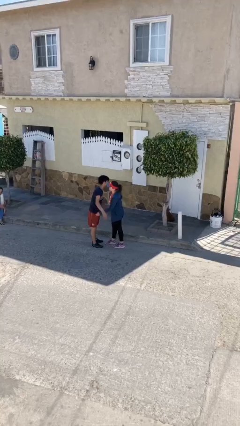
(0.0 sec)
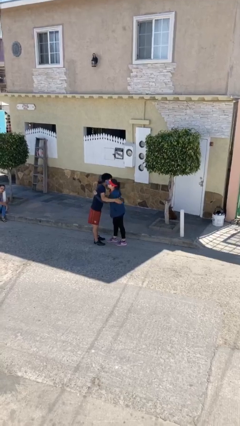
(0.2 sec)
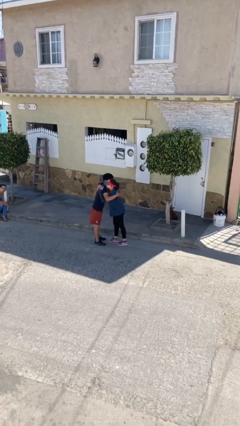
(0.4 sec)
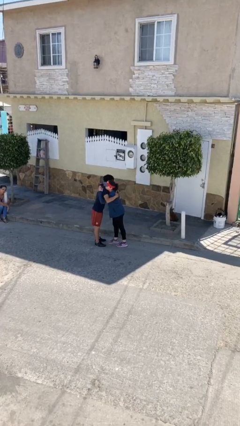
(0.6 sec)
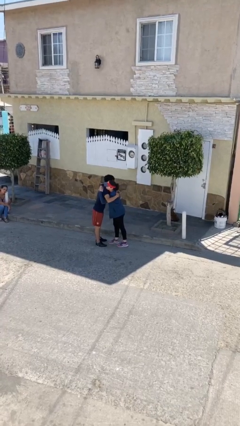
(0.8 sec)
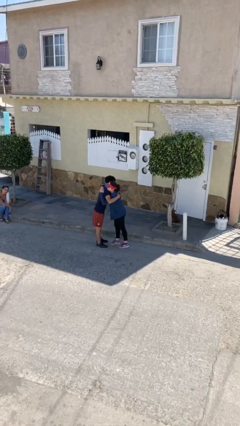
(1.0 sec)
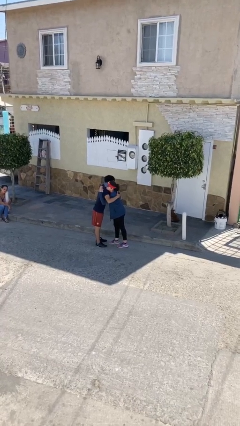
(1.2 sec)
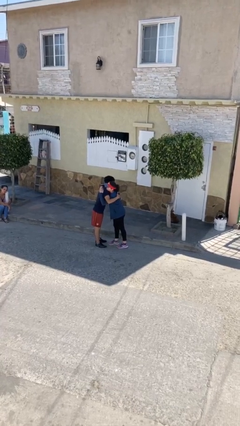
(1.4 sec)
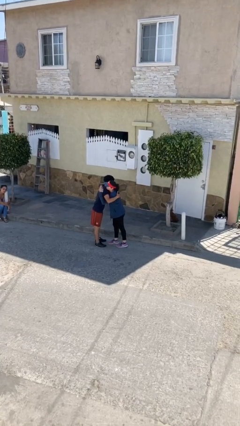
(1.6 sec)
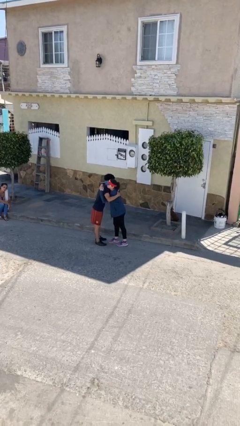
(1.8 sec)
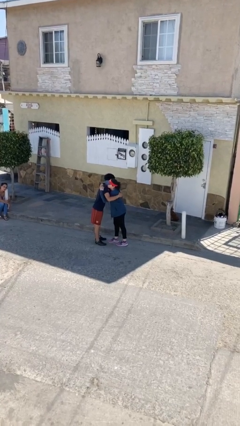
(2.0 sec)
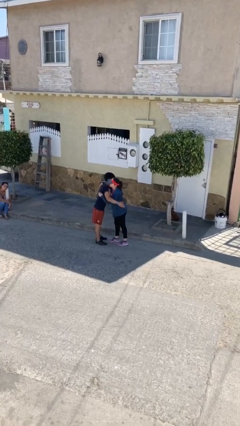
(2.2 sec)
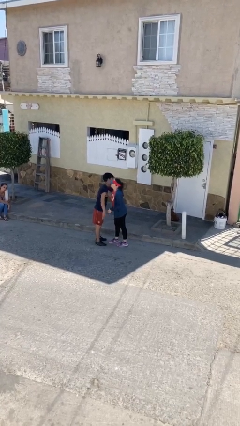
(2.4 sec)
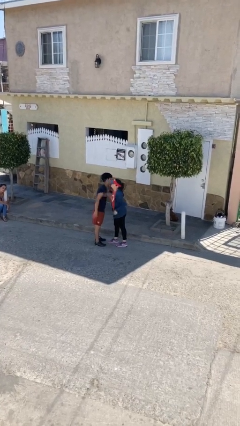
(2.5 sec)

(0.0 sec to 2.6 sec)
person embraces person

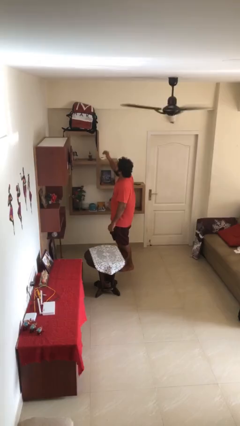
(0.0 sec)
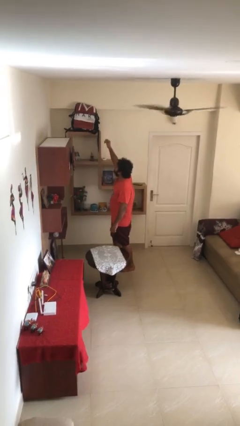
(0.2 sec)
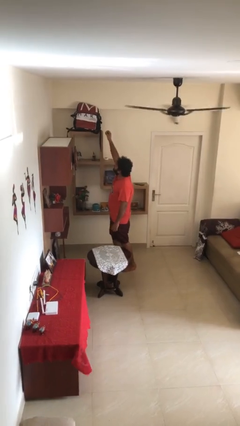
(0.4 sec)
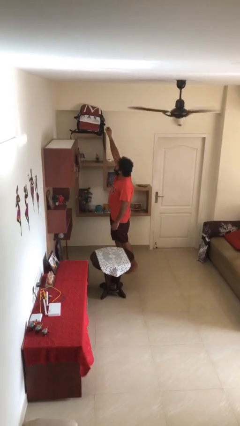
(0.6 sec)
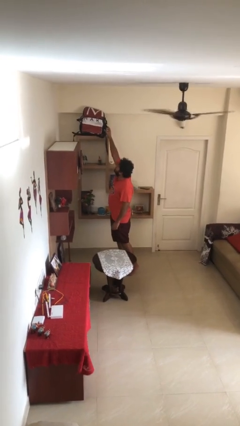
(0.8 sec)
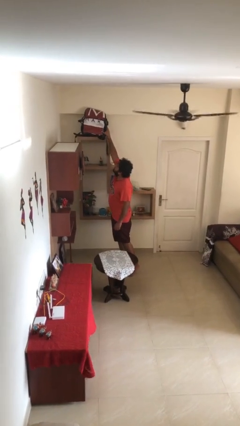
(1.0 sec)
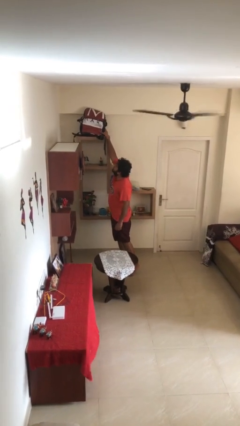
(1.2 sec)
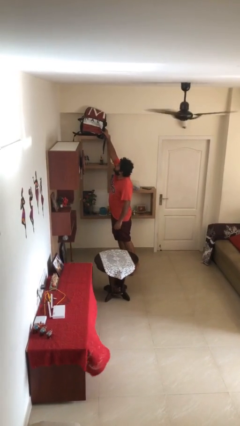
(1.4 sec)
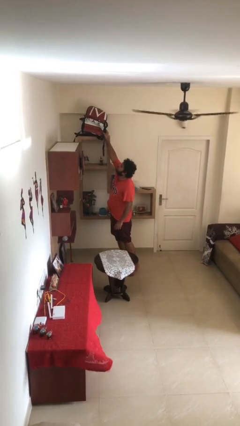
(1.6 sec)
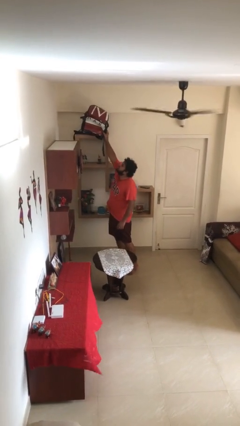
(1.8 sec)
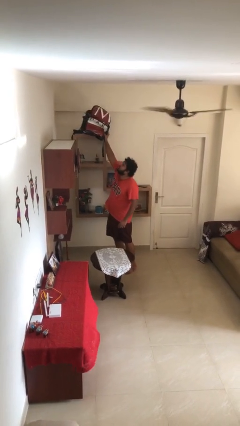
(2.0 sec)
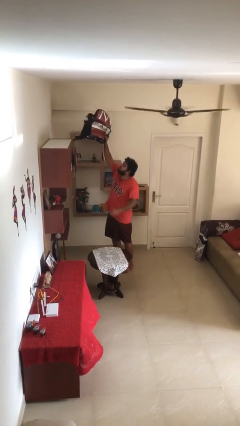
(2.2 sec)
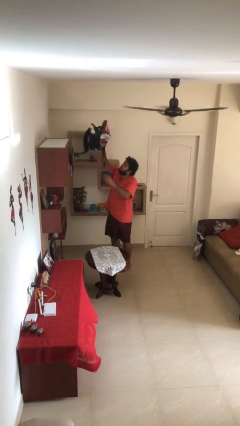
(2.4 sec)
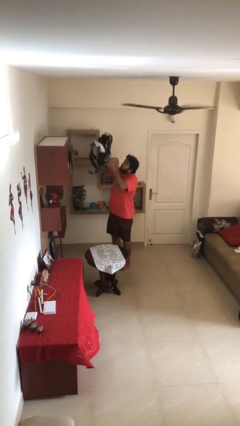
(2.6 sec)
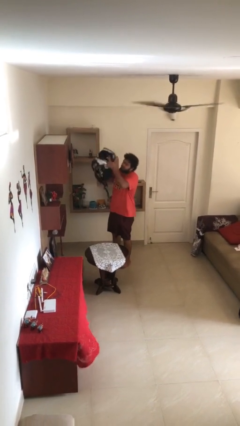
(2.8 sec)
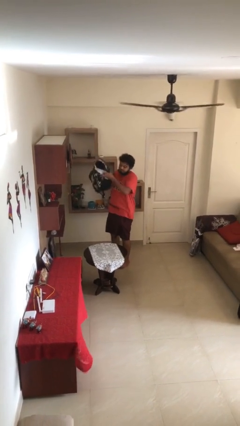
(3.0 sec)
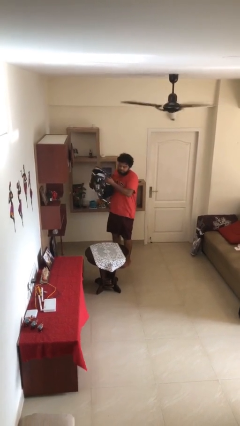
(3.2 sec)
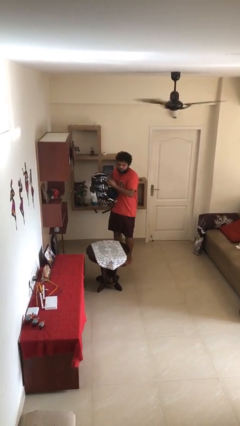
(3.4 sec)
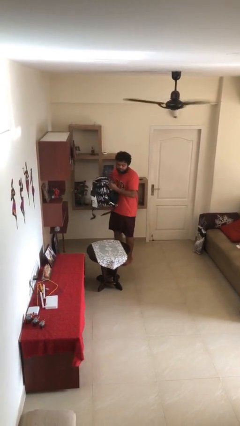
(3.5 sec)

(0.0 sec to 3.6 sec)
person picks up object from shelf

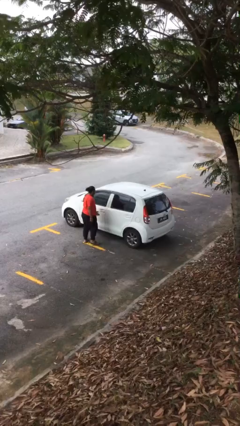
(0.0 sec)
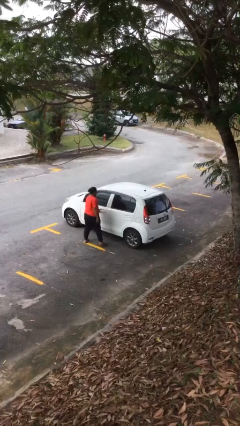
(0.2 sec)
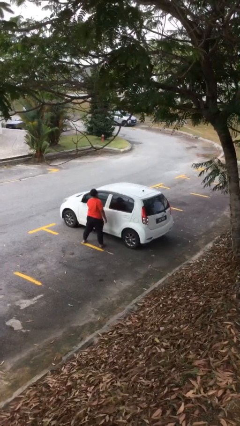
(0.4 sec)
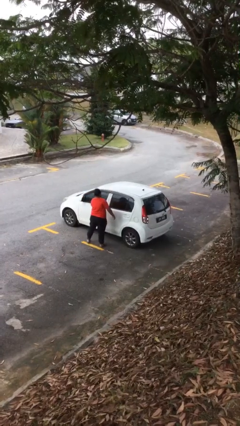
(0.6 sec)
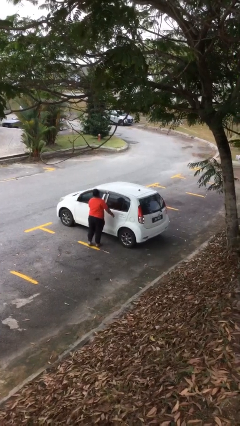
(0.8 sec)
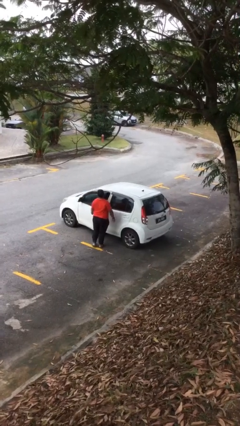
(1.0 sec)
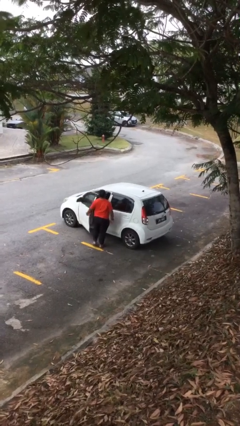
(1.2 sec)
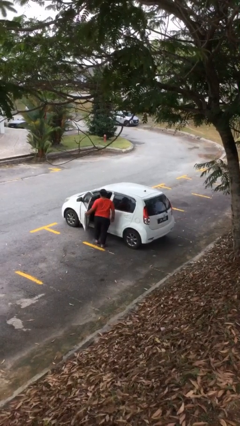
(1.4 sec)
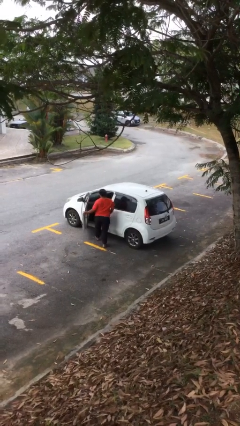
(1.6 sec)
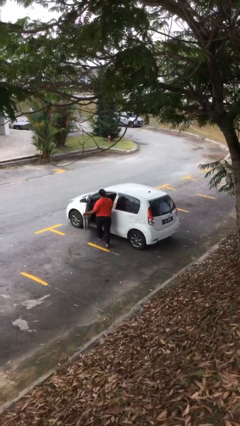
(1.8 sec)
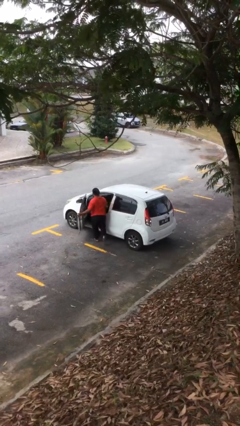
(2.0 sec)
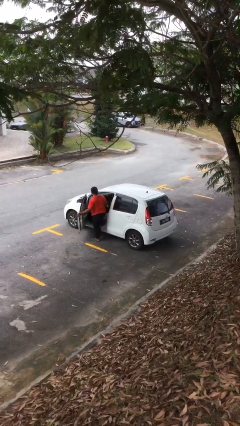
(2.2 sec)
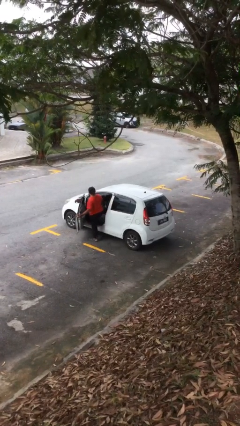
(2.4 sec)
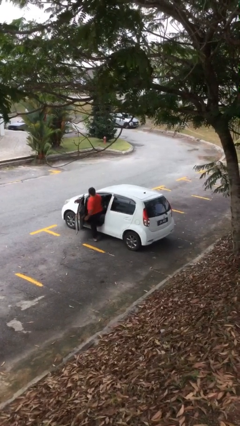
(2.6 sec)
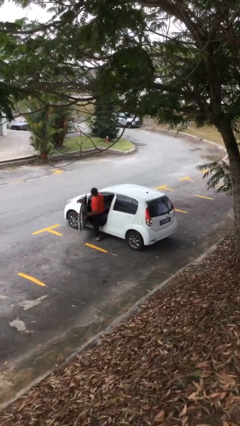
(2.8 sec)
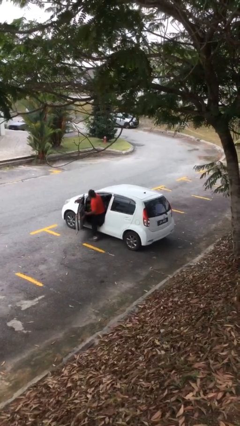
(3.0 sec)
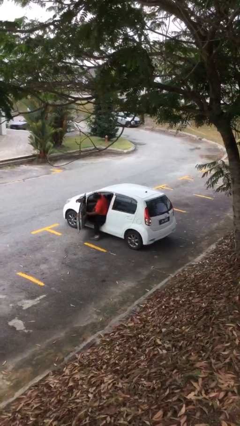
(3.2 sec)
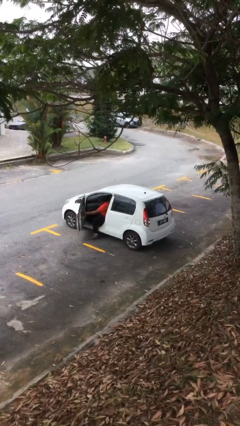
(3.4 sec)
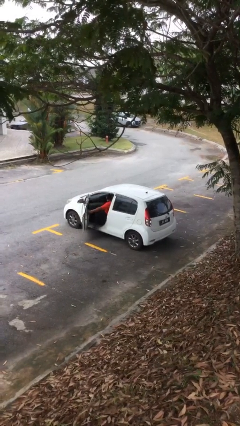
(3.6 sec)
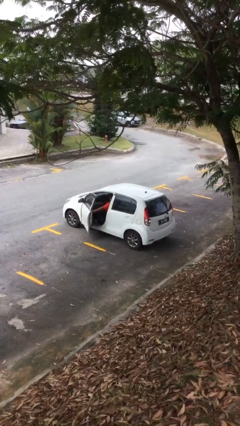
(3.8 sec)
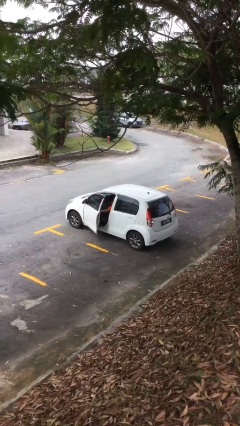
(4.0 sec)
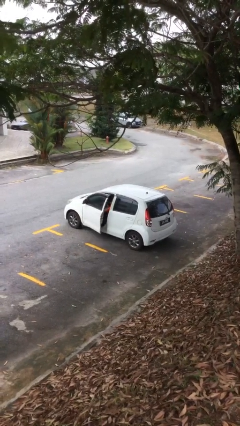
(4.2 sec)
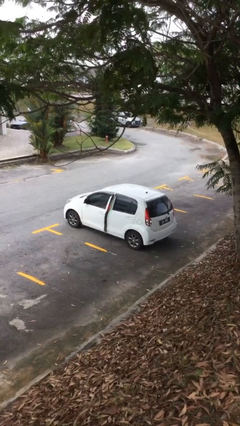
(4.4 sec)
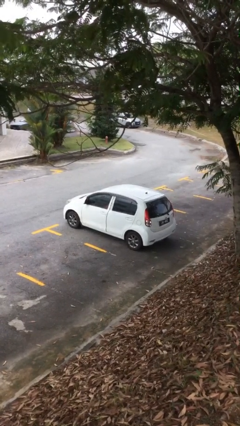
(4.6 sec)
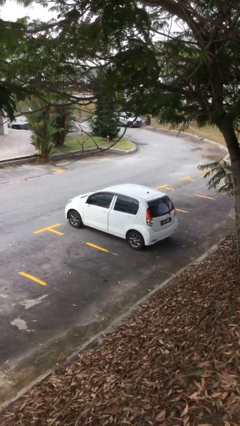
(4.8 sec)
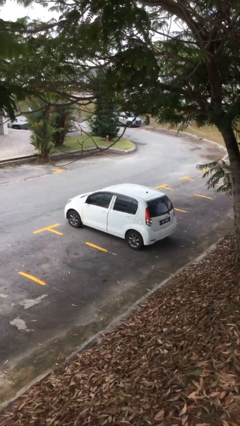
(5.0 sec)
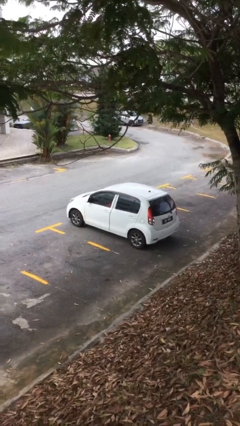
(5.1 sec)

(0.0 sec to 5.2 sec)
car picks up person

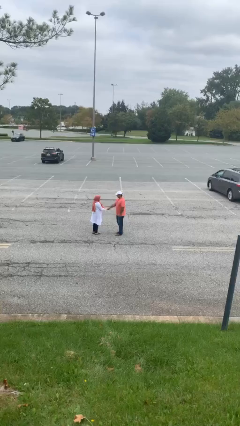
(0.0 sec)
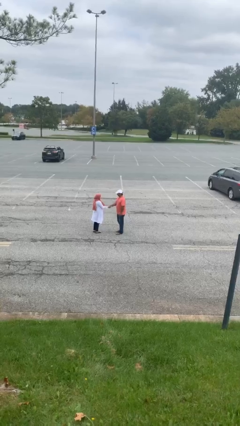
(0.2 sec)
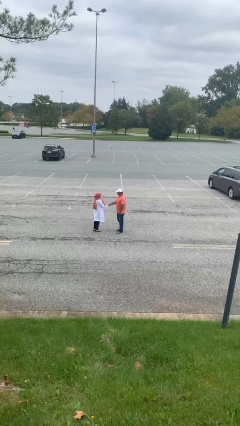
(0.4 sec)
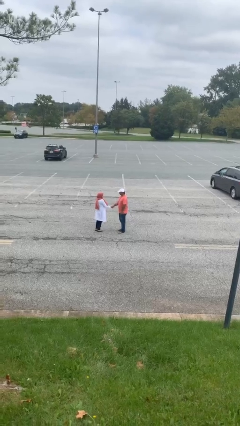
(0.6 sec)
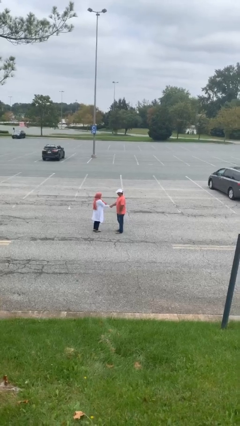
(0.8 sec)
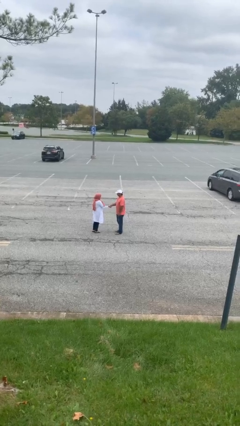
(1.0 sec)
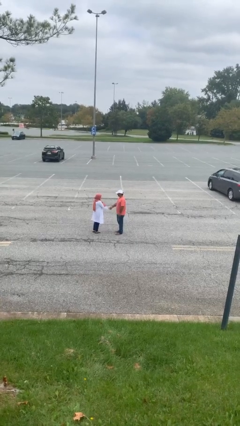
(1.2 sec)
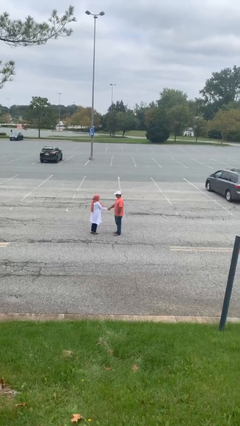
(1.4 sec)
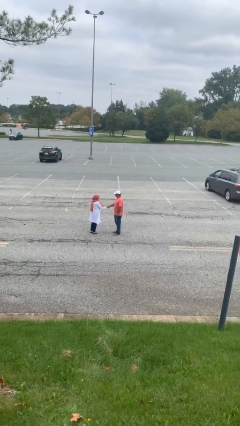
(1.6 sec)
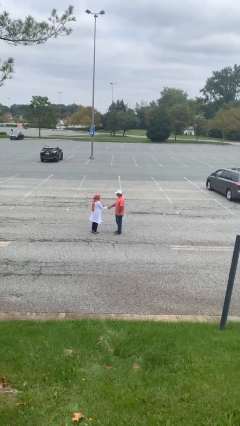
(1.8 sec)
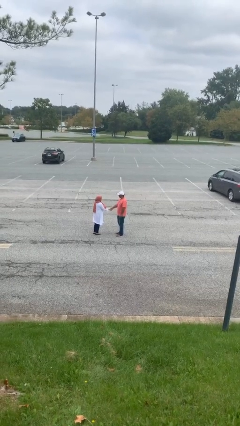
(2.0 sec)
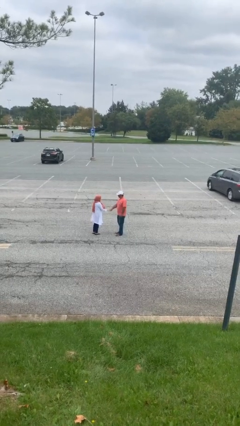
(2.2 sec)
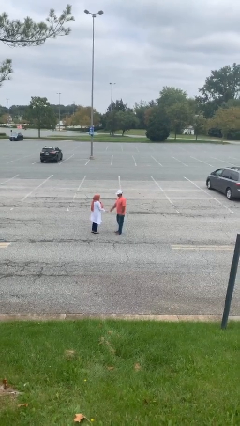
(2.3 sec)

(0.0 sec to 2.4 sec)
person shakes hand

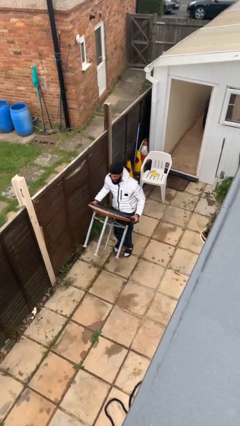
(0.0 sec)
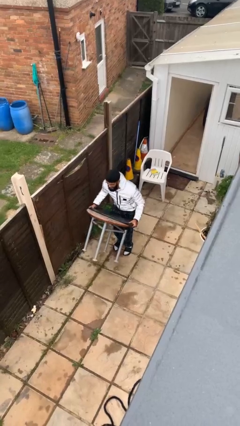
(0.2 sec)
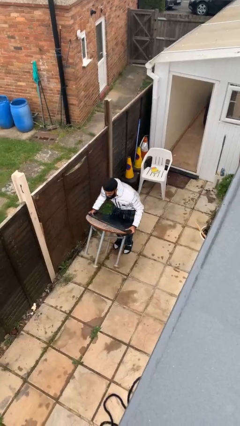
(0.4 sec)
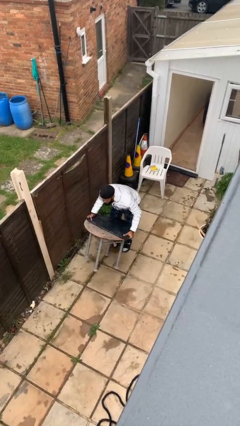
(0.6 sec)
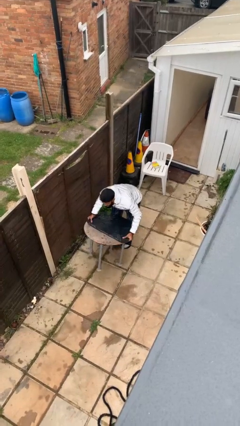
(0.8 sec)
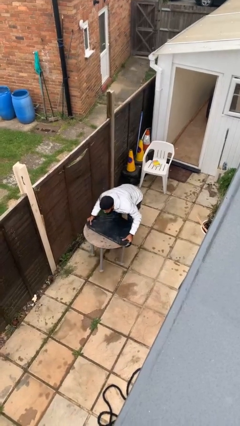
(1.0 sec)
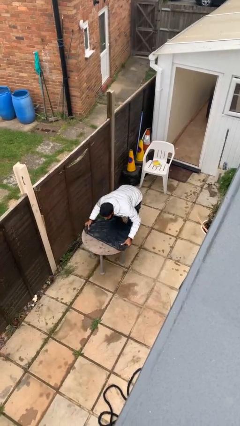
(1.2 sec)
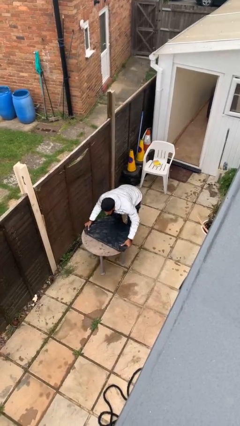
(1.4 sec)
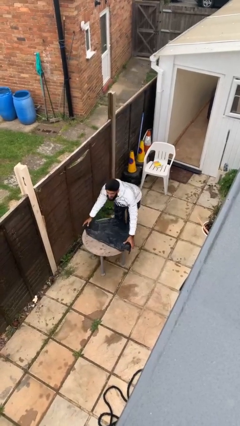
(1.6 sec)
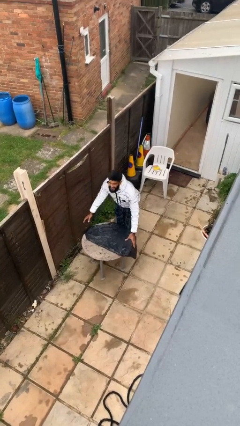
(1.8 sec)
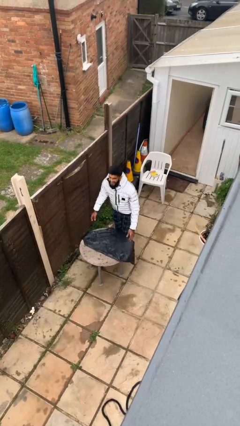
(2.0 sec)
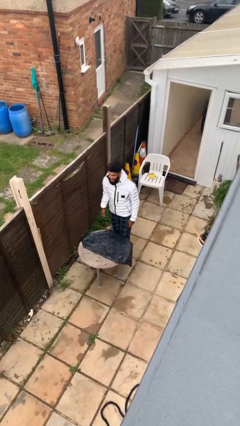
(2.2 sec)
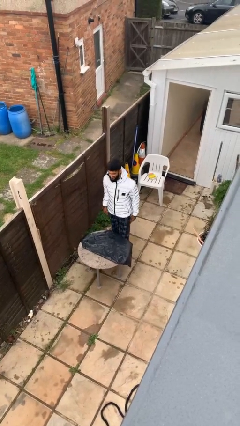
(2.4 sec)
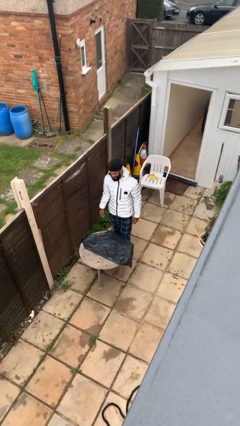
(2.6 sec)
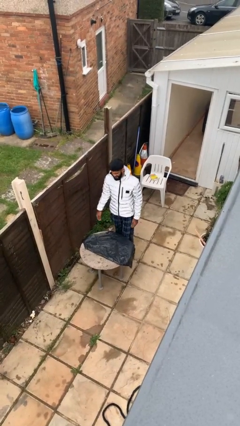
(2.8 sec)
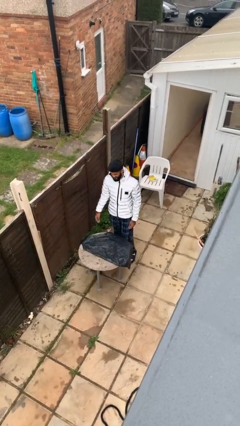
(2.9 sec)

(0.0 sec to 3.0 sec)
person puts down object on floor

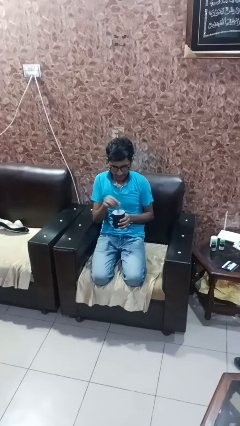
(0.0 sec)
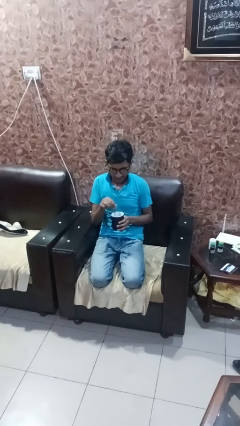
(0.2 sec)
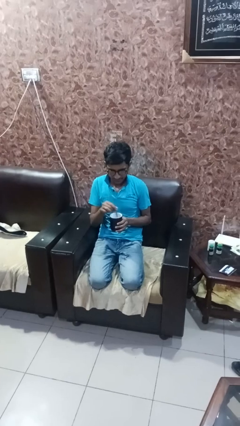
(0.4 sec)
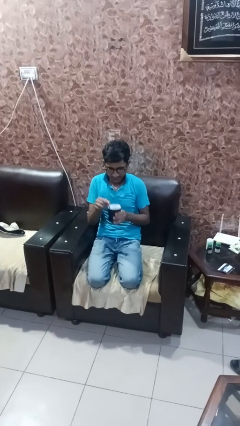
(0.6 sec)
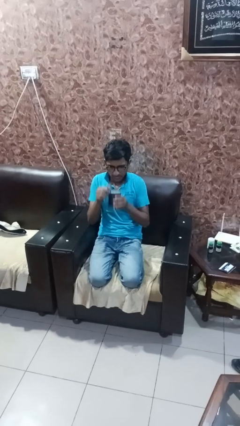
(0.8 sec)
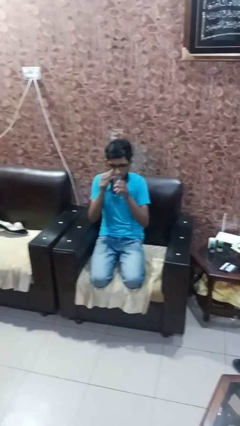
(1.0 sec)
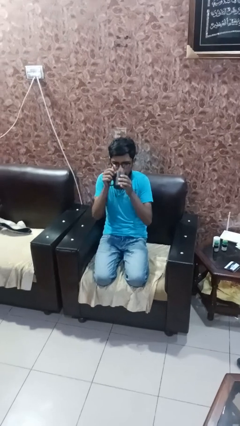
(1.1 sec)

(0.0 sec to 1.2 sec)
person stirs mug
